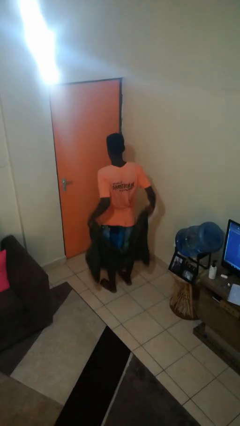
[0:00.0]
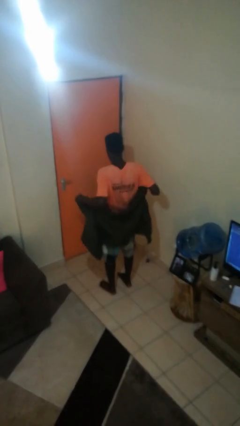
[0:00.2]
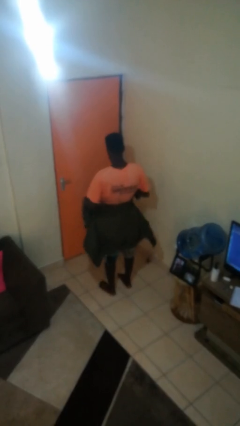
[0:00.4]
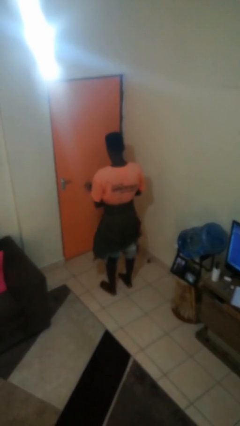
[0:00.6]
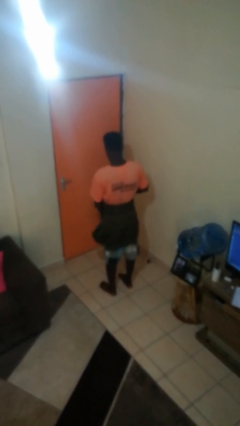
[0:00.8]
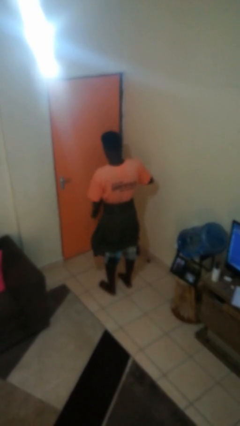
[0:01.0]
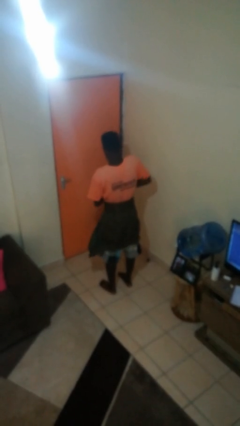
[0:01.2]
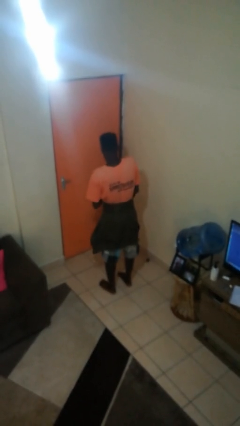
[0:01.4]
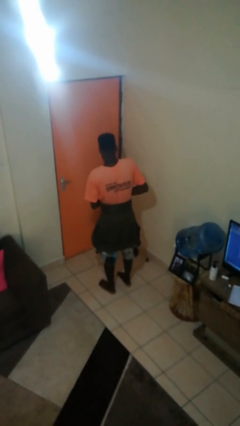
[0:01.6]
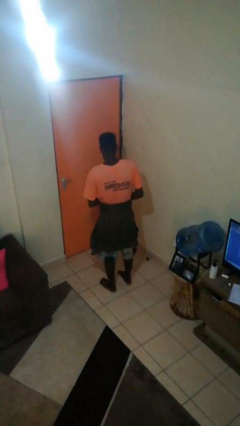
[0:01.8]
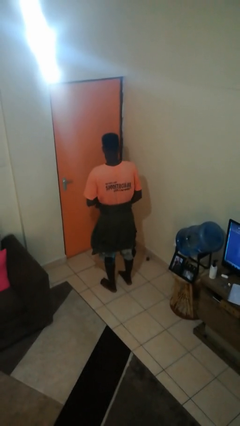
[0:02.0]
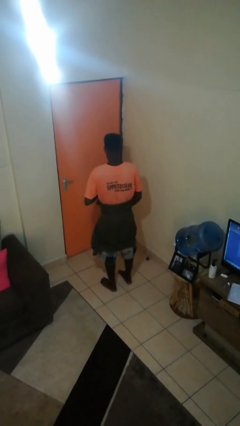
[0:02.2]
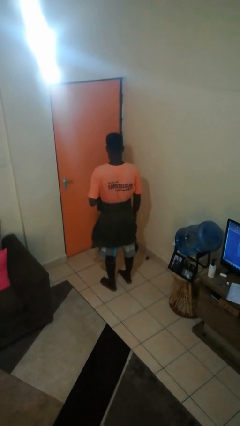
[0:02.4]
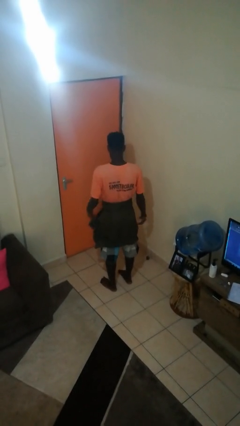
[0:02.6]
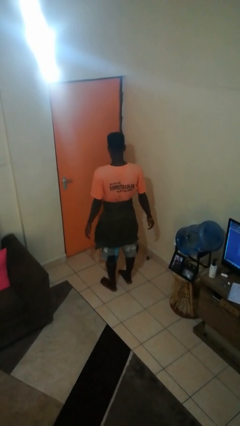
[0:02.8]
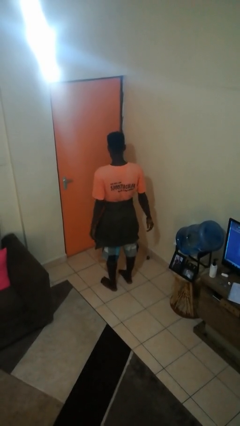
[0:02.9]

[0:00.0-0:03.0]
person ties jacket around waist

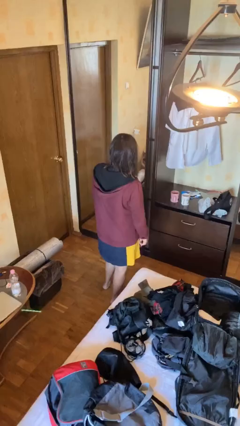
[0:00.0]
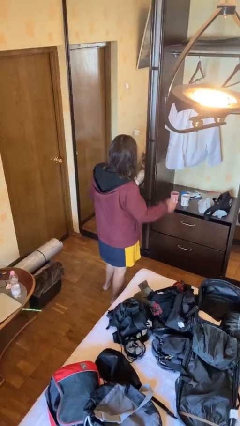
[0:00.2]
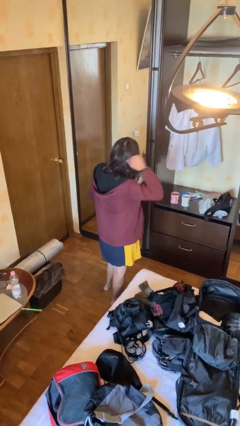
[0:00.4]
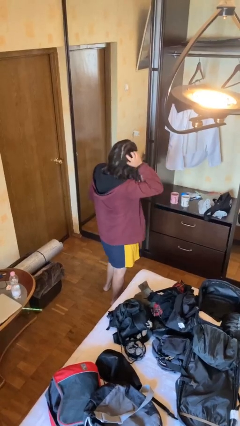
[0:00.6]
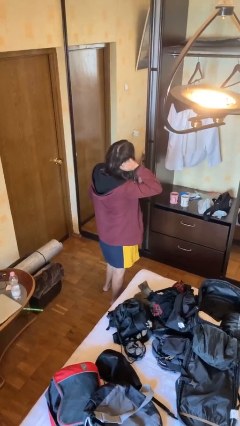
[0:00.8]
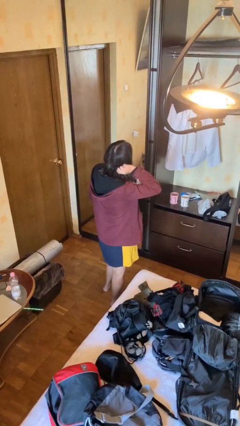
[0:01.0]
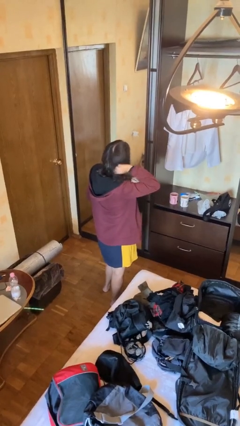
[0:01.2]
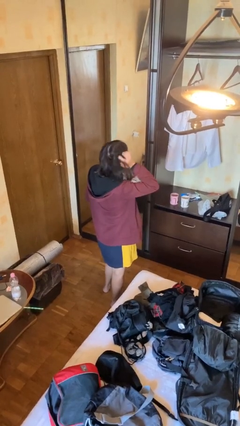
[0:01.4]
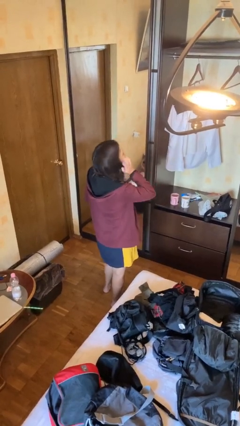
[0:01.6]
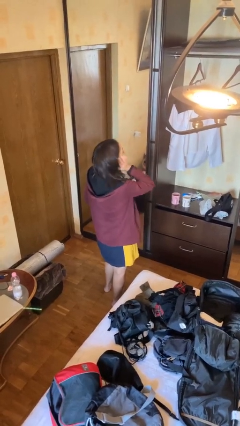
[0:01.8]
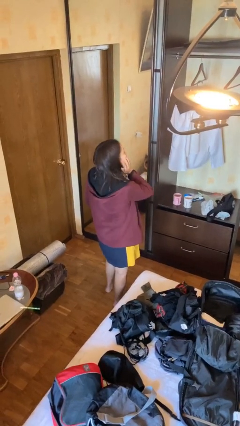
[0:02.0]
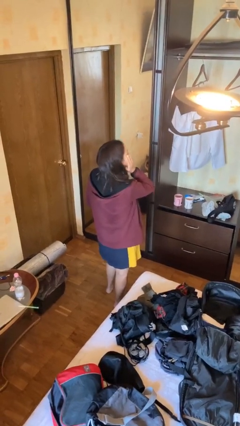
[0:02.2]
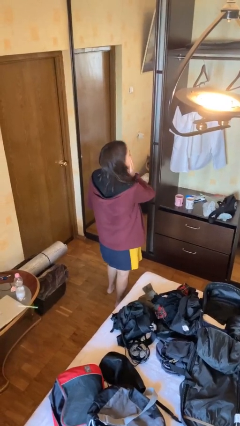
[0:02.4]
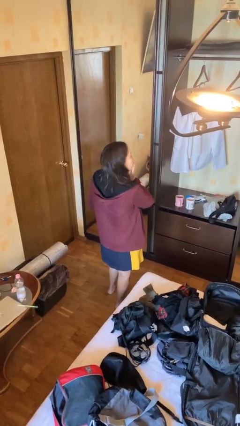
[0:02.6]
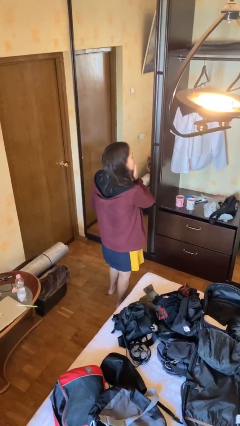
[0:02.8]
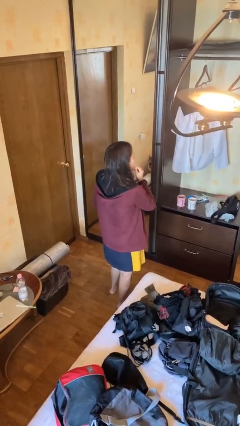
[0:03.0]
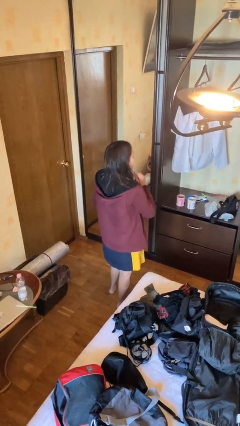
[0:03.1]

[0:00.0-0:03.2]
person scratches face

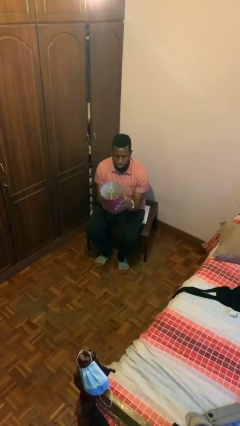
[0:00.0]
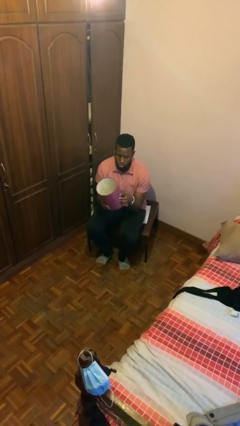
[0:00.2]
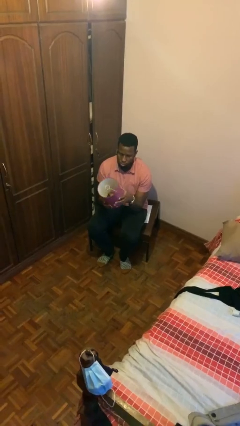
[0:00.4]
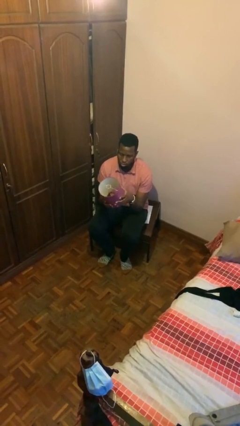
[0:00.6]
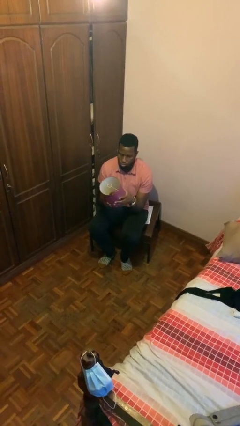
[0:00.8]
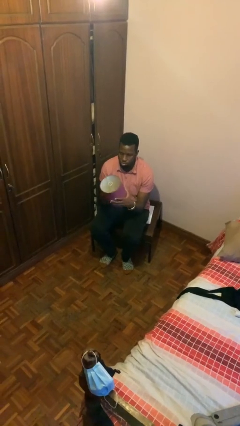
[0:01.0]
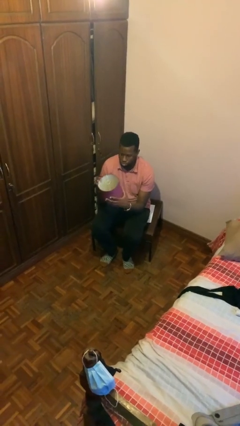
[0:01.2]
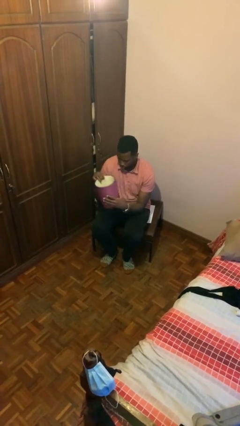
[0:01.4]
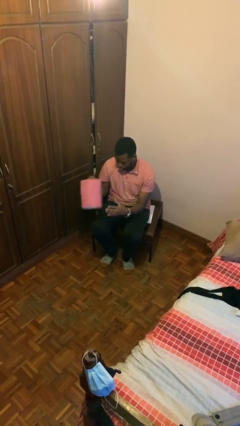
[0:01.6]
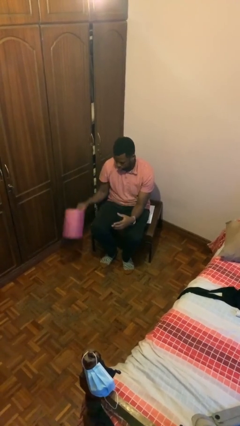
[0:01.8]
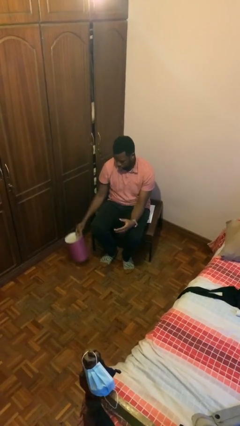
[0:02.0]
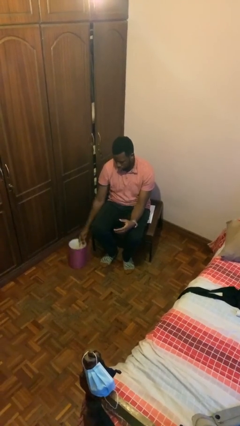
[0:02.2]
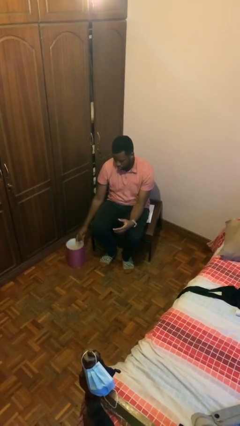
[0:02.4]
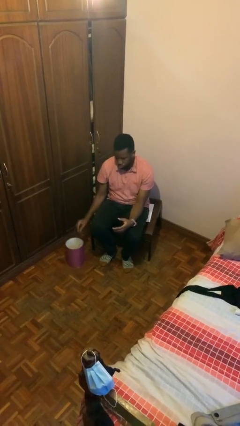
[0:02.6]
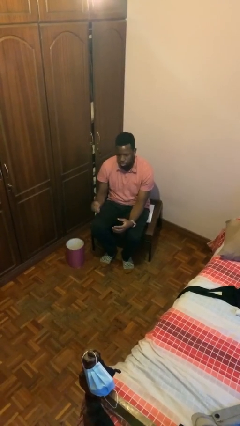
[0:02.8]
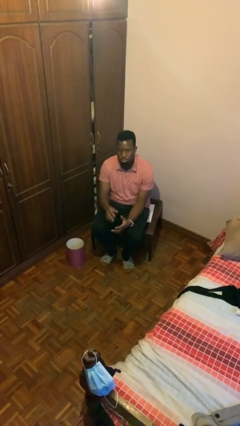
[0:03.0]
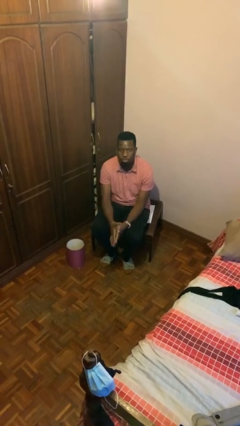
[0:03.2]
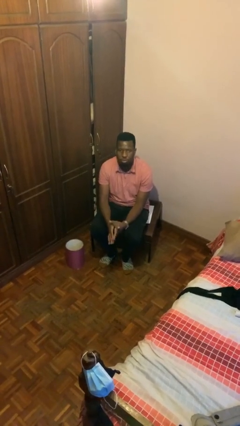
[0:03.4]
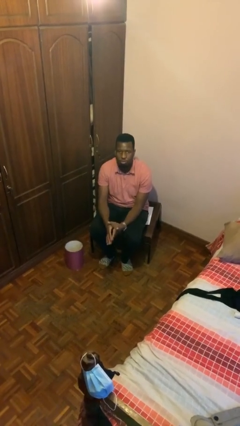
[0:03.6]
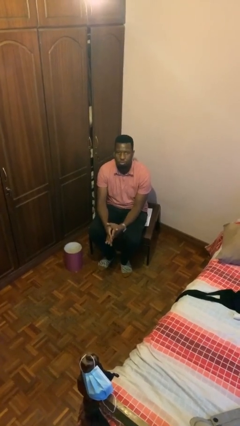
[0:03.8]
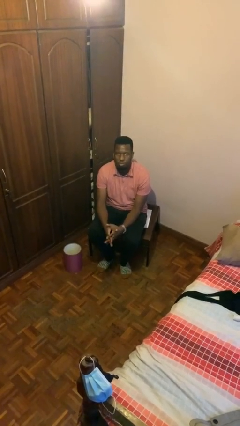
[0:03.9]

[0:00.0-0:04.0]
person puts down object on floor

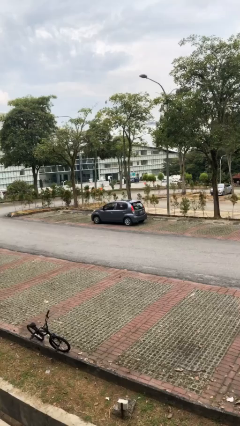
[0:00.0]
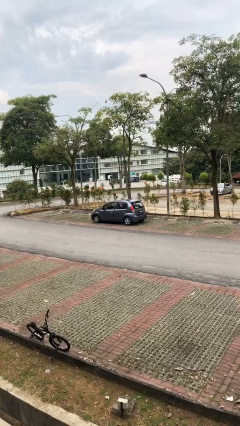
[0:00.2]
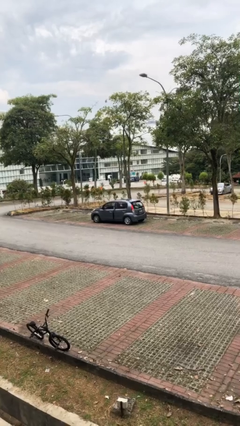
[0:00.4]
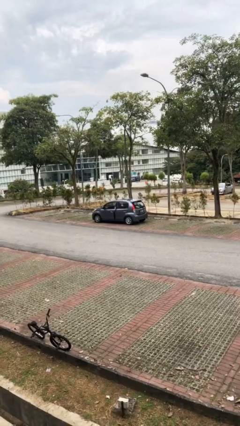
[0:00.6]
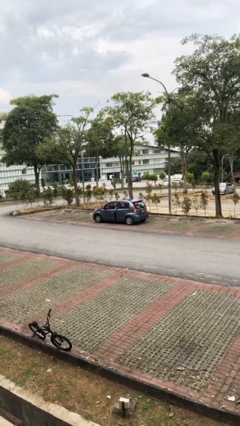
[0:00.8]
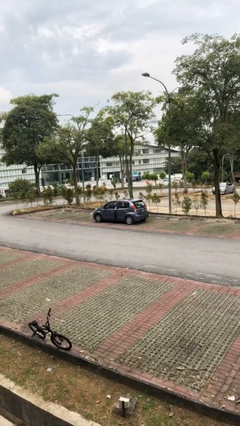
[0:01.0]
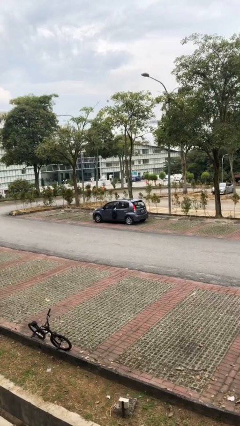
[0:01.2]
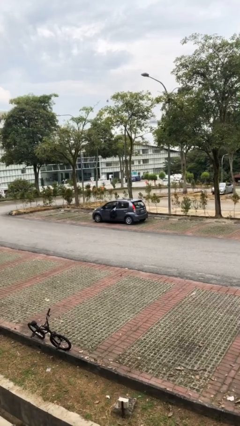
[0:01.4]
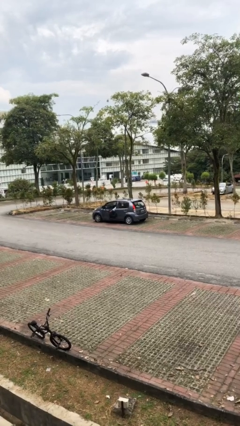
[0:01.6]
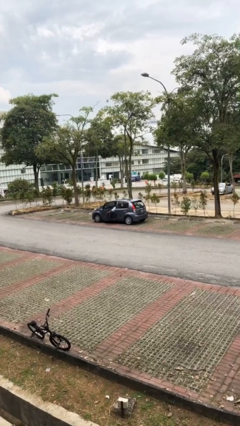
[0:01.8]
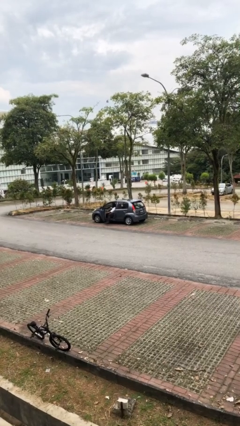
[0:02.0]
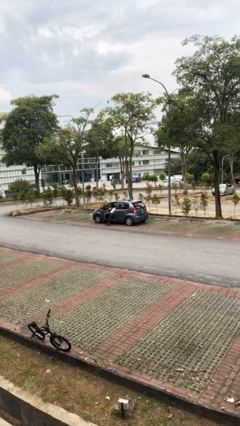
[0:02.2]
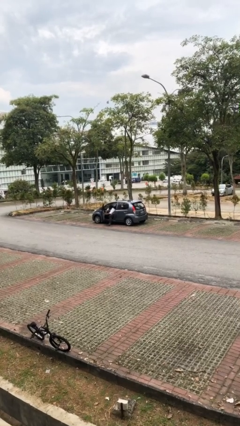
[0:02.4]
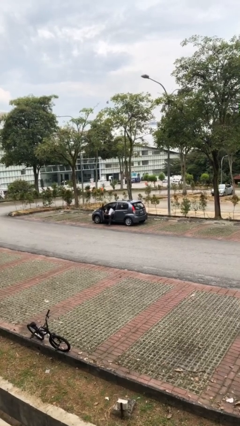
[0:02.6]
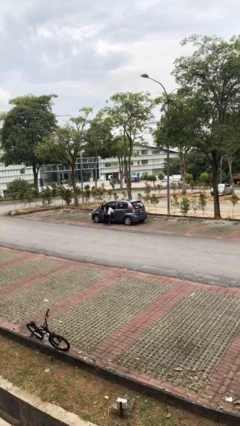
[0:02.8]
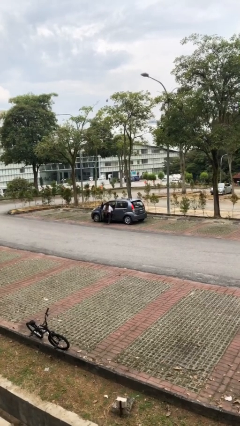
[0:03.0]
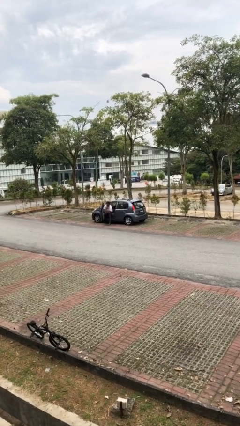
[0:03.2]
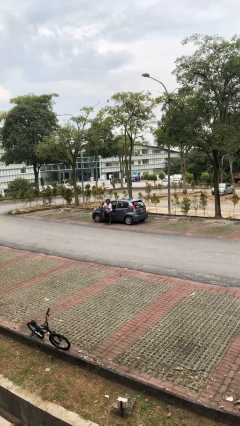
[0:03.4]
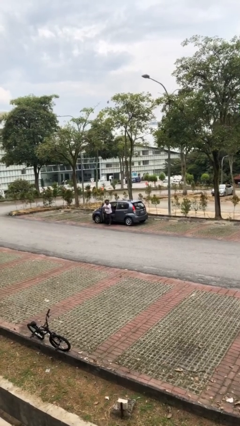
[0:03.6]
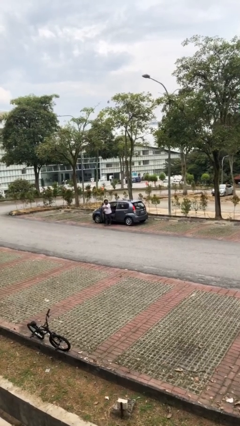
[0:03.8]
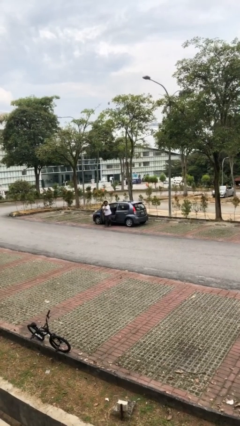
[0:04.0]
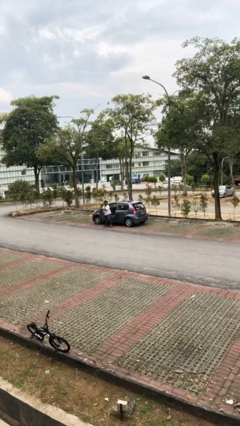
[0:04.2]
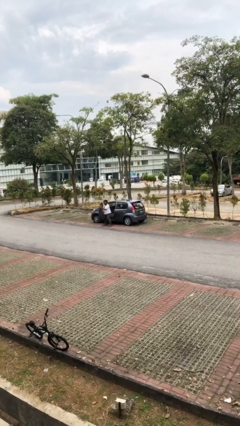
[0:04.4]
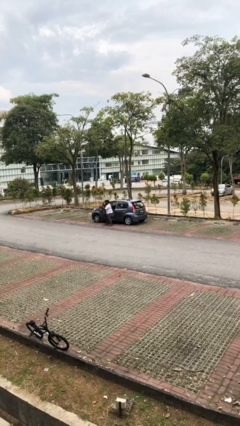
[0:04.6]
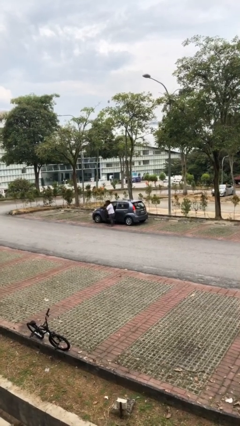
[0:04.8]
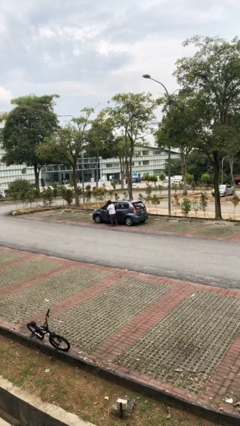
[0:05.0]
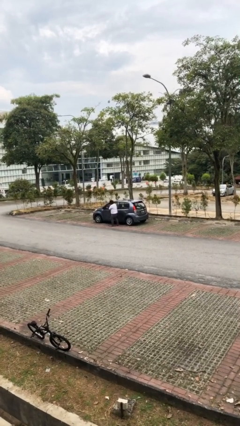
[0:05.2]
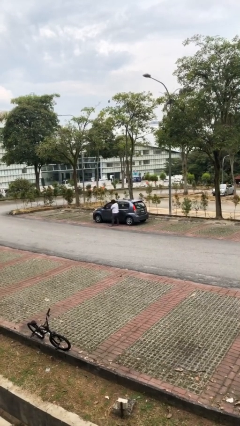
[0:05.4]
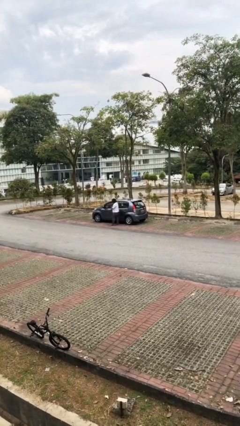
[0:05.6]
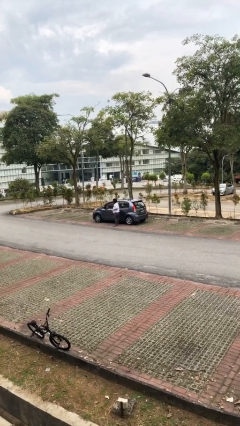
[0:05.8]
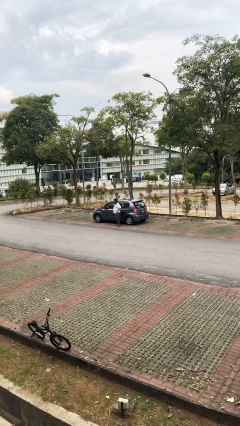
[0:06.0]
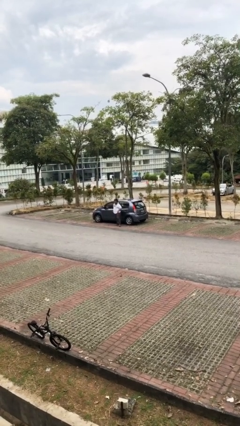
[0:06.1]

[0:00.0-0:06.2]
car drops off person

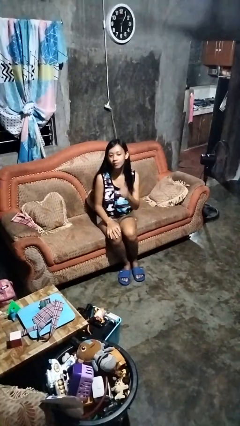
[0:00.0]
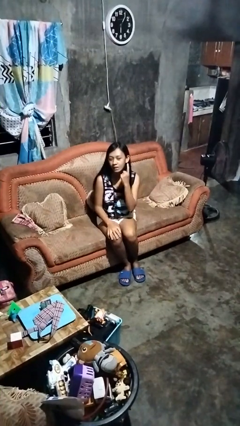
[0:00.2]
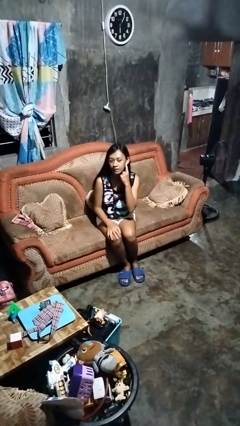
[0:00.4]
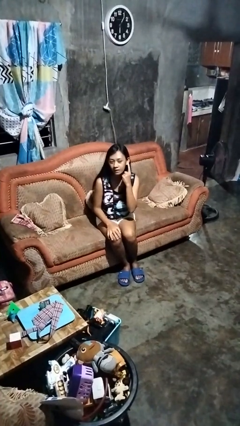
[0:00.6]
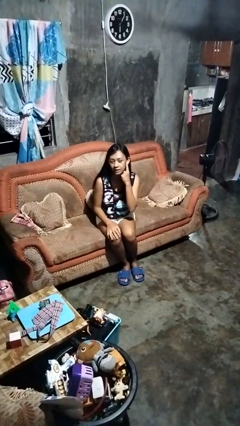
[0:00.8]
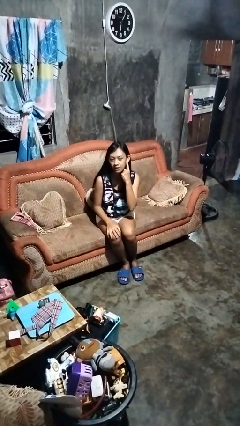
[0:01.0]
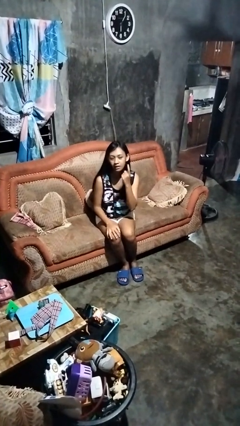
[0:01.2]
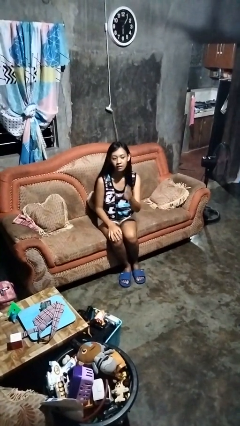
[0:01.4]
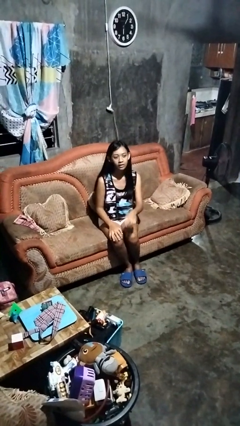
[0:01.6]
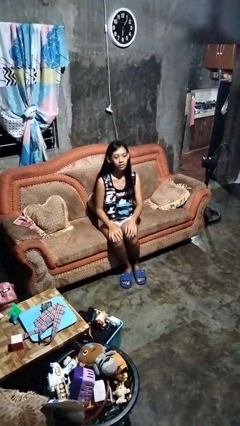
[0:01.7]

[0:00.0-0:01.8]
person gestures listen closely
